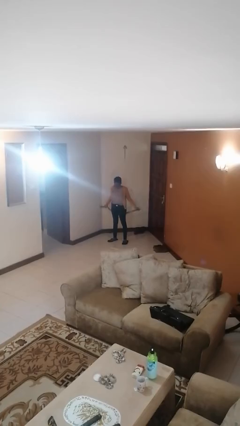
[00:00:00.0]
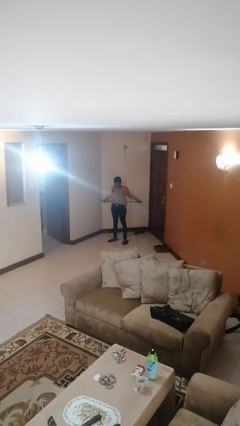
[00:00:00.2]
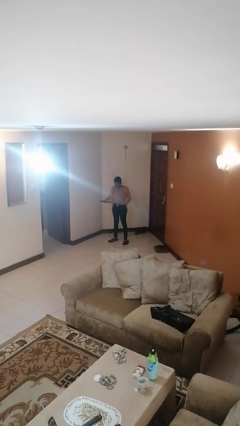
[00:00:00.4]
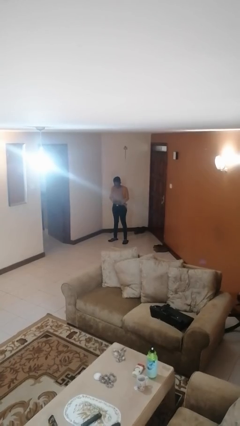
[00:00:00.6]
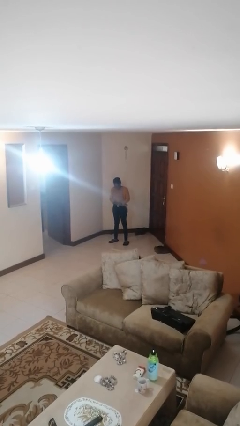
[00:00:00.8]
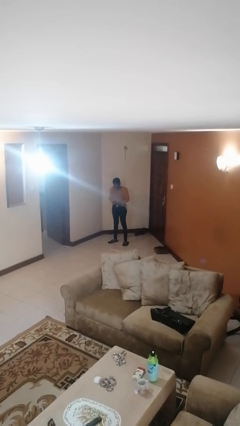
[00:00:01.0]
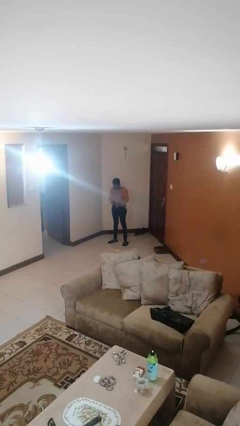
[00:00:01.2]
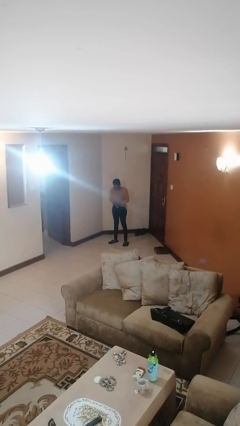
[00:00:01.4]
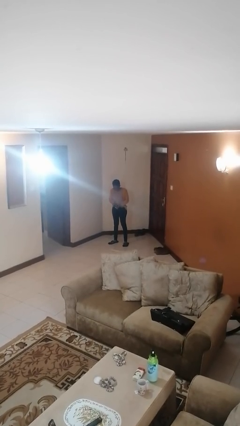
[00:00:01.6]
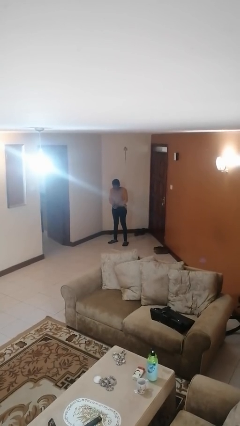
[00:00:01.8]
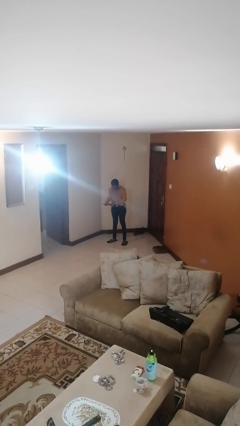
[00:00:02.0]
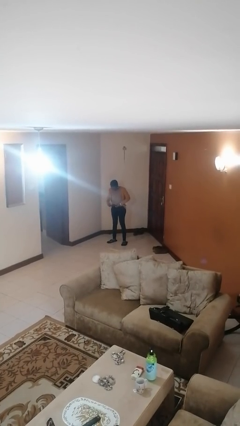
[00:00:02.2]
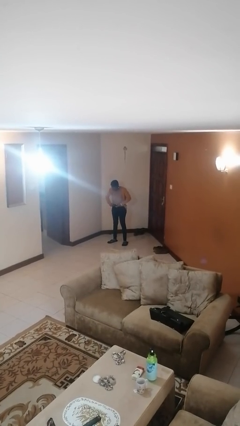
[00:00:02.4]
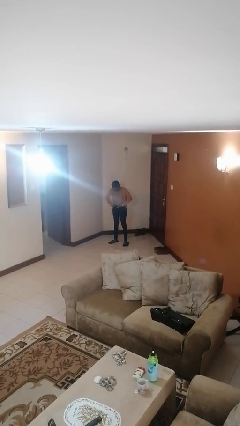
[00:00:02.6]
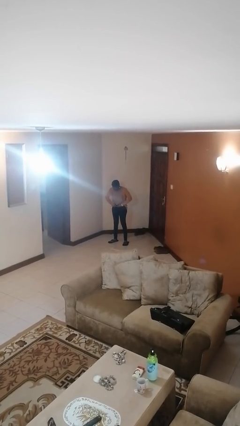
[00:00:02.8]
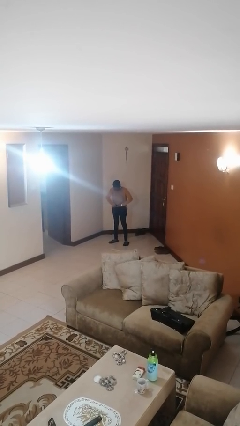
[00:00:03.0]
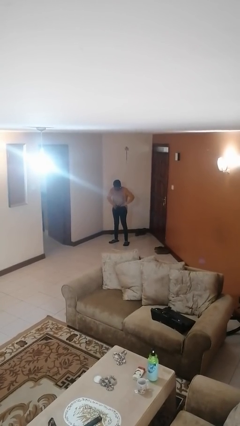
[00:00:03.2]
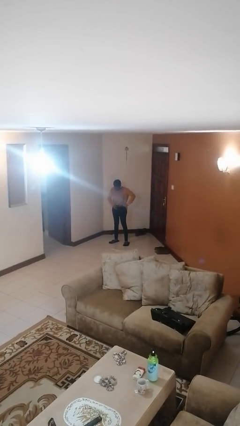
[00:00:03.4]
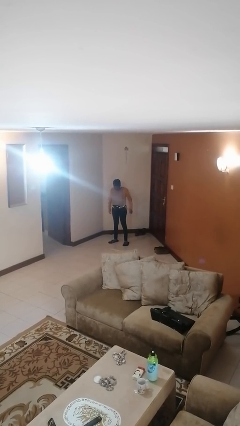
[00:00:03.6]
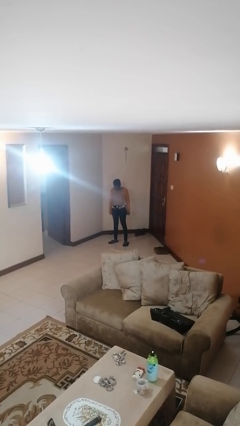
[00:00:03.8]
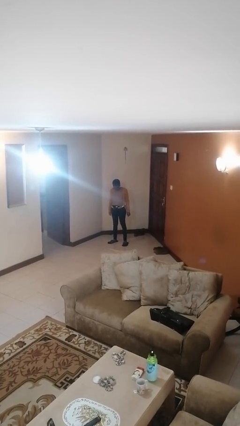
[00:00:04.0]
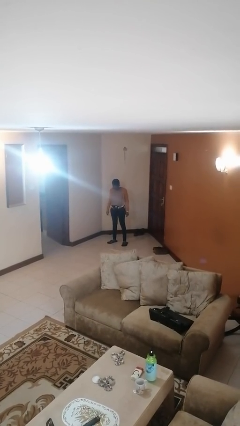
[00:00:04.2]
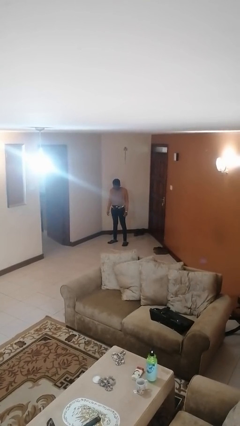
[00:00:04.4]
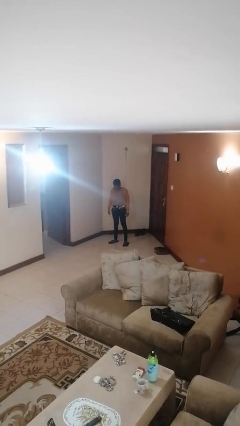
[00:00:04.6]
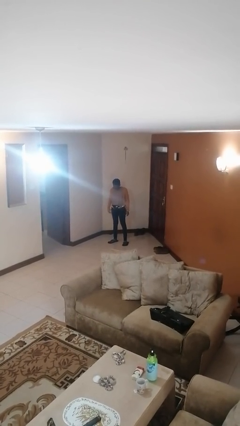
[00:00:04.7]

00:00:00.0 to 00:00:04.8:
person puts on belt

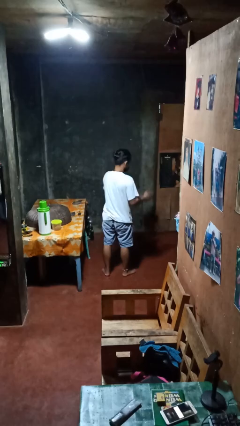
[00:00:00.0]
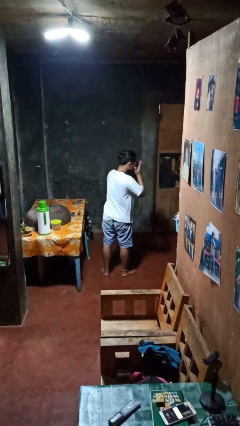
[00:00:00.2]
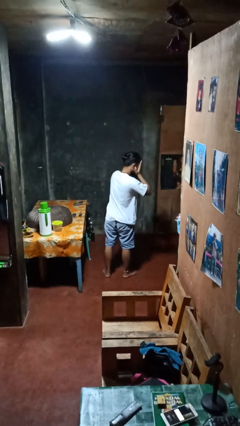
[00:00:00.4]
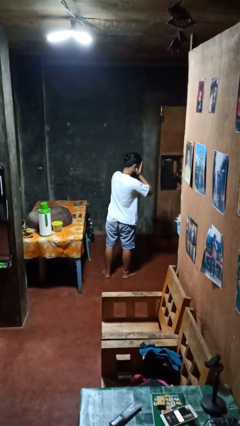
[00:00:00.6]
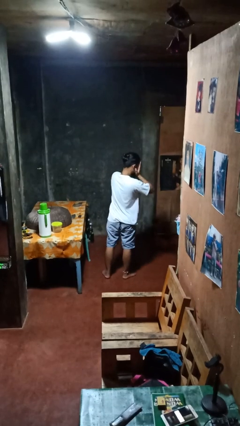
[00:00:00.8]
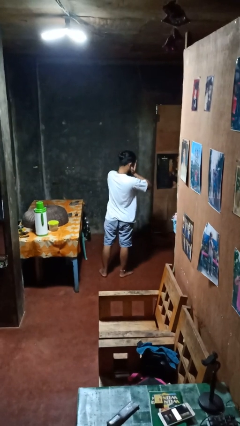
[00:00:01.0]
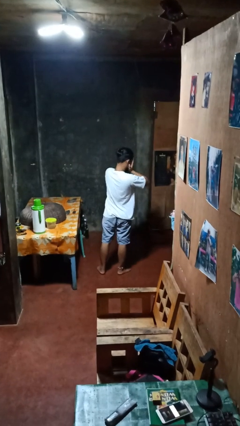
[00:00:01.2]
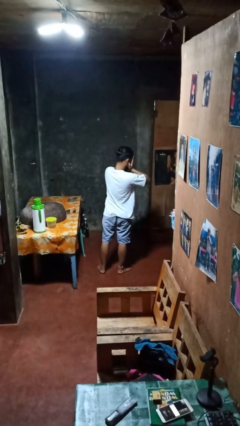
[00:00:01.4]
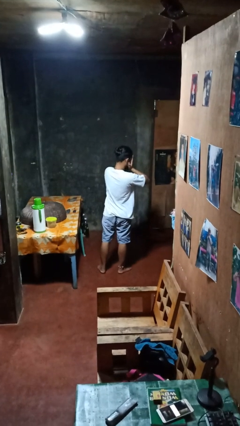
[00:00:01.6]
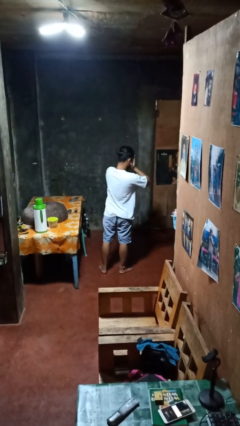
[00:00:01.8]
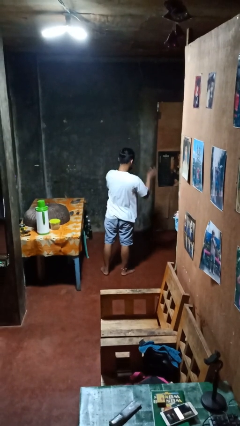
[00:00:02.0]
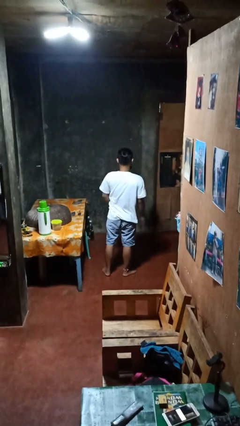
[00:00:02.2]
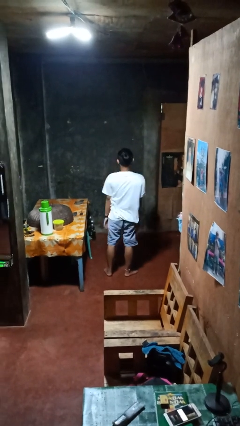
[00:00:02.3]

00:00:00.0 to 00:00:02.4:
person covers face with hands

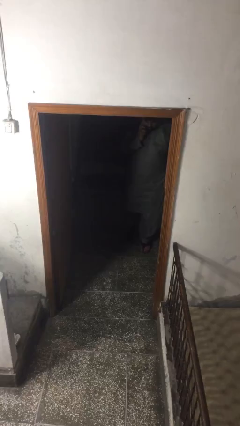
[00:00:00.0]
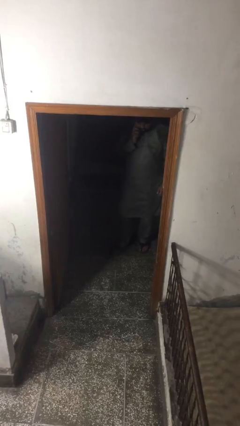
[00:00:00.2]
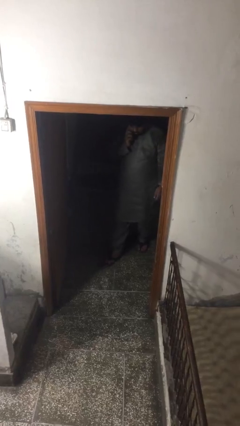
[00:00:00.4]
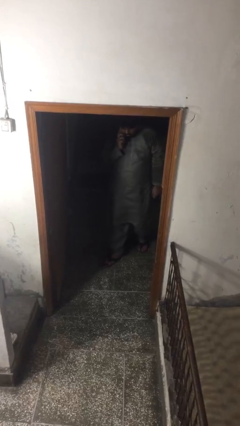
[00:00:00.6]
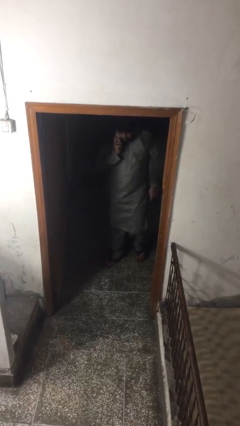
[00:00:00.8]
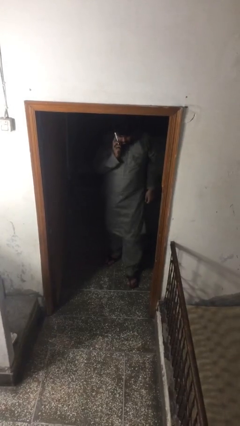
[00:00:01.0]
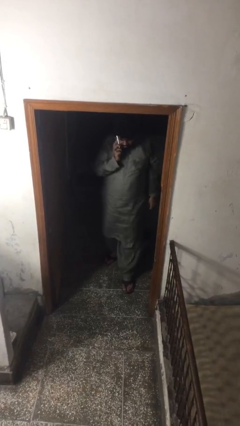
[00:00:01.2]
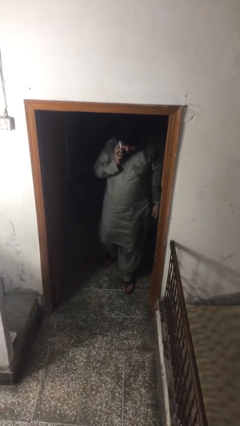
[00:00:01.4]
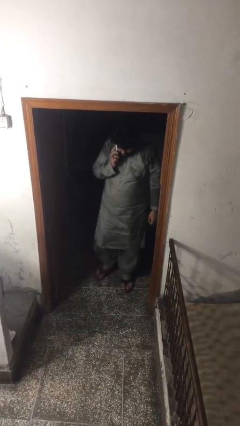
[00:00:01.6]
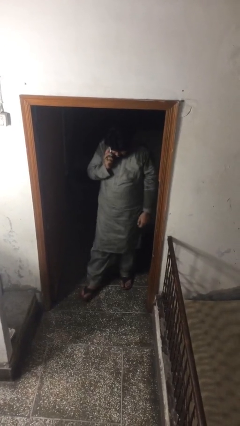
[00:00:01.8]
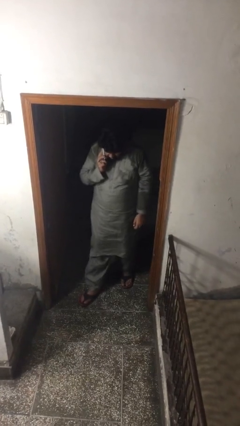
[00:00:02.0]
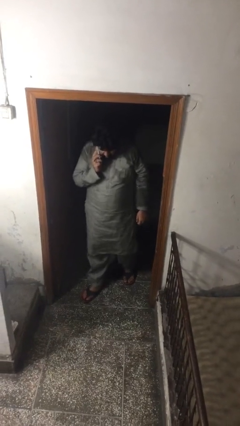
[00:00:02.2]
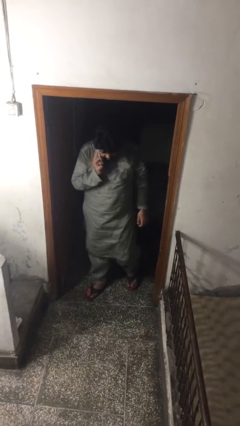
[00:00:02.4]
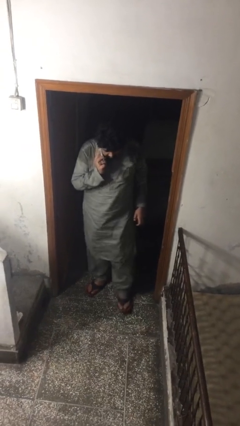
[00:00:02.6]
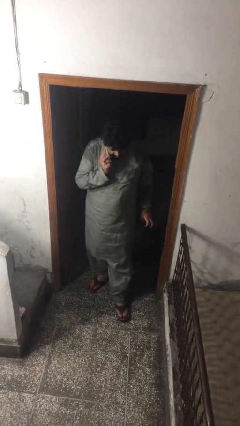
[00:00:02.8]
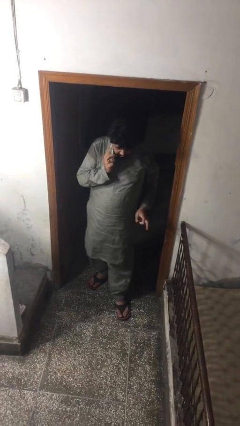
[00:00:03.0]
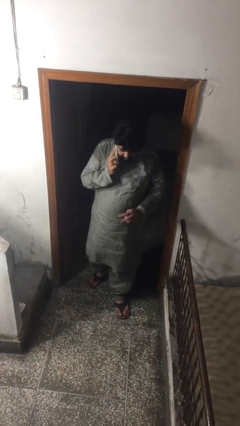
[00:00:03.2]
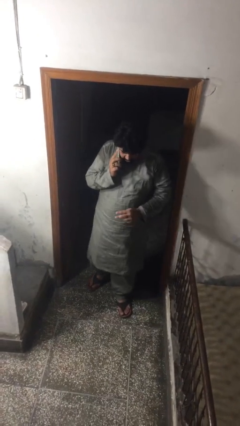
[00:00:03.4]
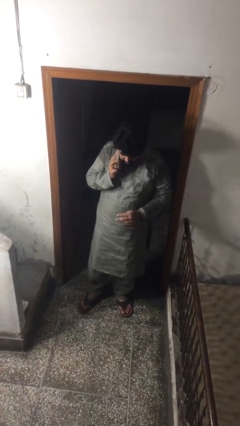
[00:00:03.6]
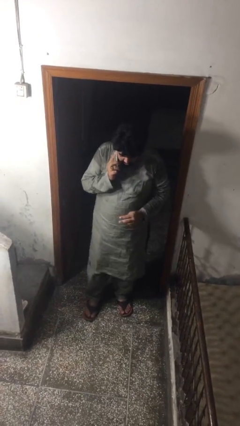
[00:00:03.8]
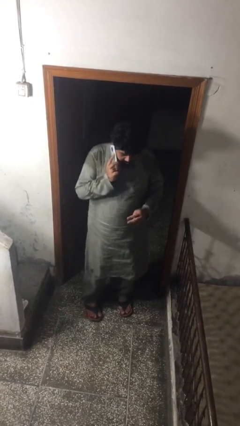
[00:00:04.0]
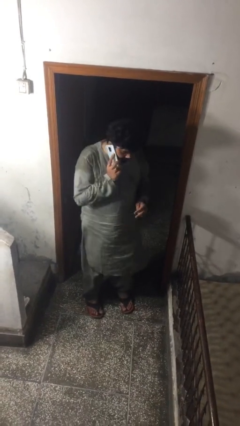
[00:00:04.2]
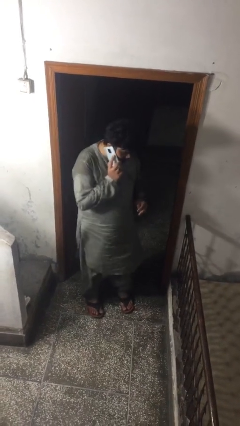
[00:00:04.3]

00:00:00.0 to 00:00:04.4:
person enters scene through structure

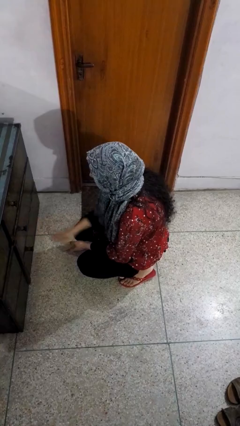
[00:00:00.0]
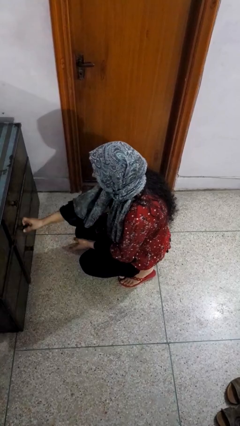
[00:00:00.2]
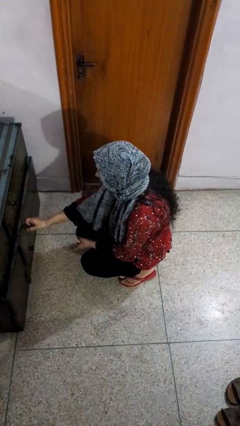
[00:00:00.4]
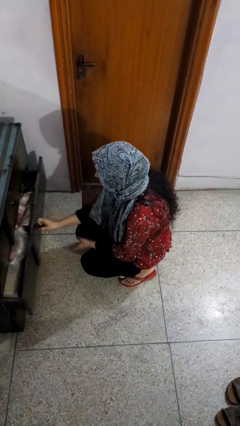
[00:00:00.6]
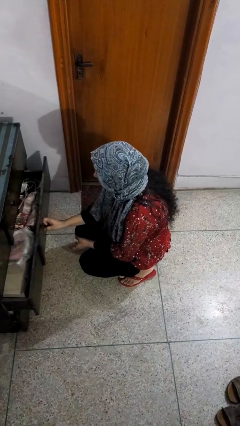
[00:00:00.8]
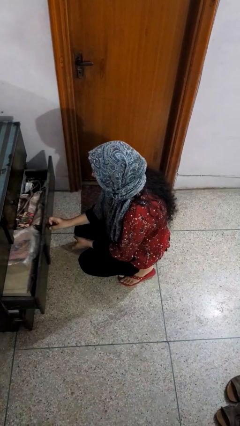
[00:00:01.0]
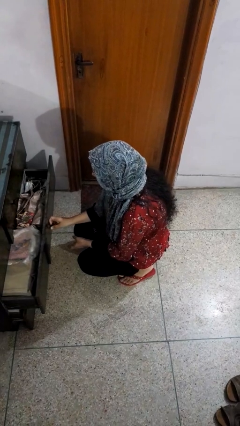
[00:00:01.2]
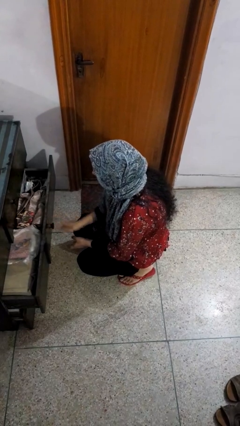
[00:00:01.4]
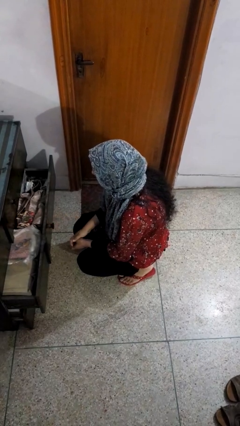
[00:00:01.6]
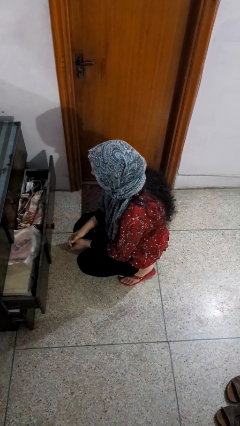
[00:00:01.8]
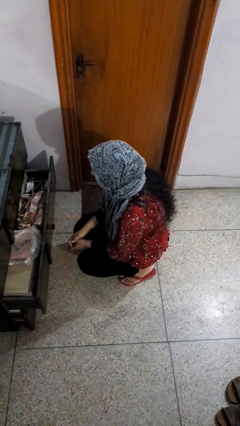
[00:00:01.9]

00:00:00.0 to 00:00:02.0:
person opens dresser drawer

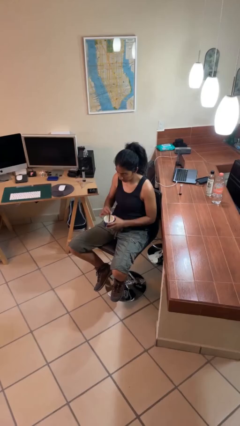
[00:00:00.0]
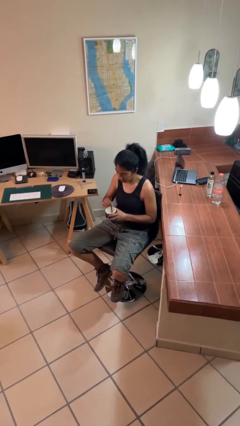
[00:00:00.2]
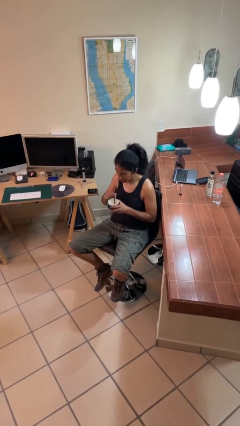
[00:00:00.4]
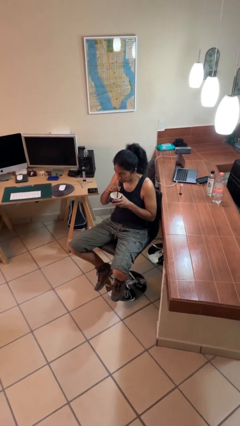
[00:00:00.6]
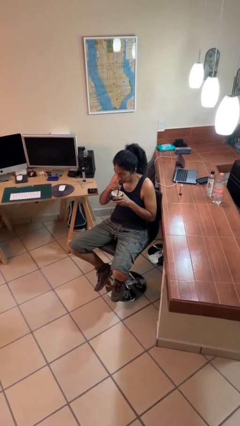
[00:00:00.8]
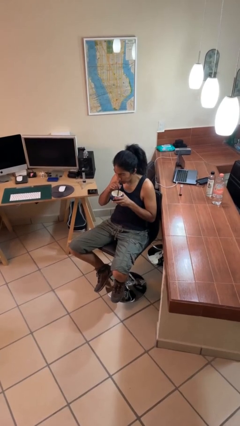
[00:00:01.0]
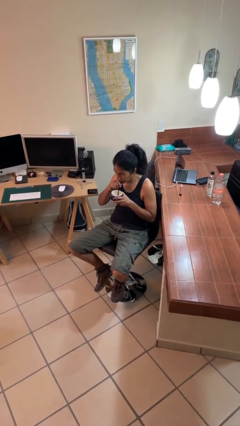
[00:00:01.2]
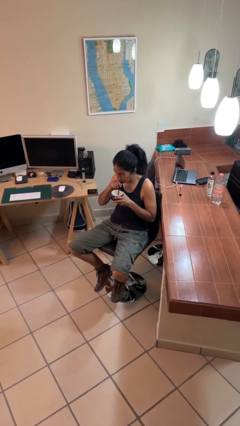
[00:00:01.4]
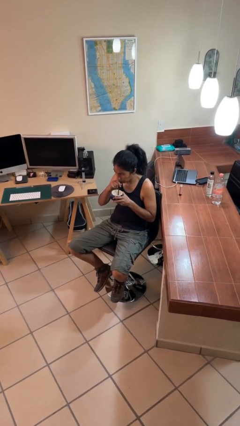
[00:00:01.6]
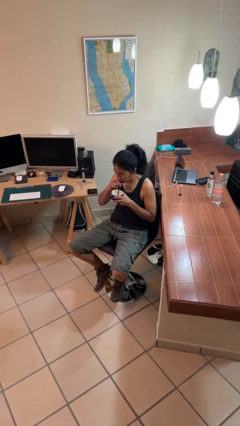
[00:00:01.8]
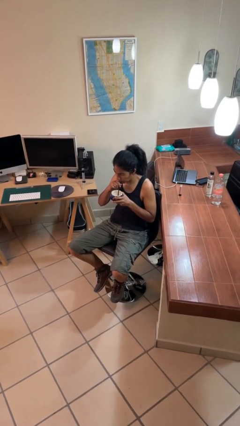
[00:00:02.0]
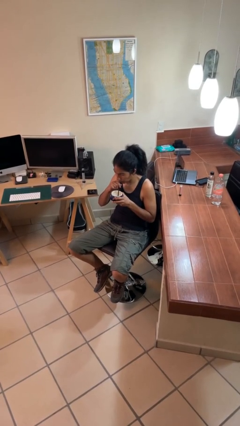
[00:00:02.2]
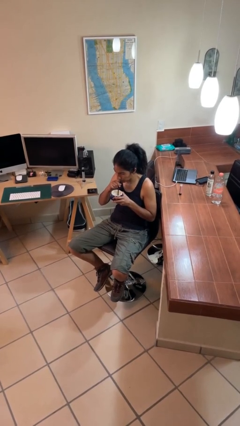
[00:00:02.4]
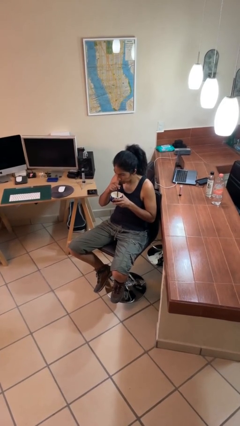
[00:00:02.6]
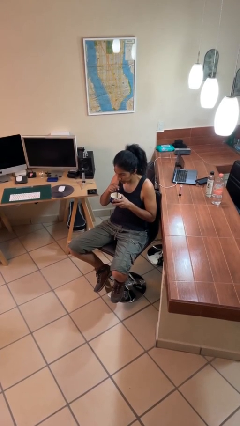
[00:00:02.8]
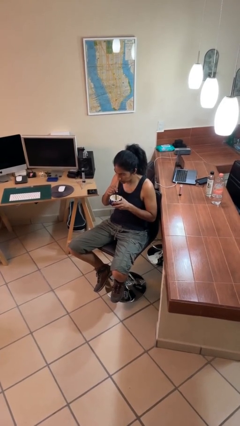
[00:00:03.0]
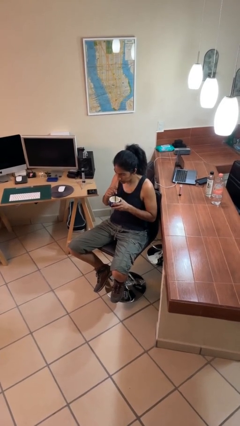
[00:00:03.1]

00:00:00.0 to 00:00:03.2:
person drinks from straw

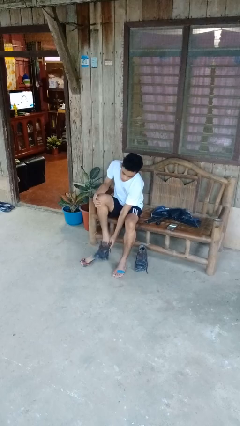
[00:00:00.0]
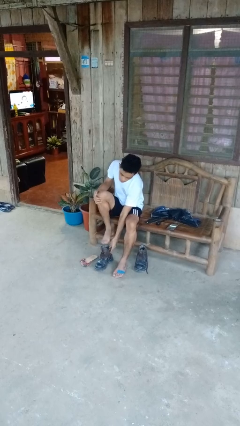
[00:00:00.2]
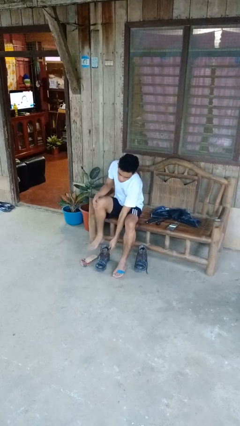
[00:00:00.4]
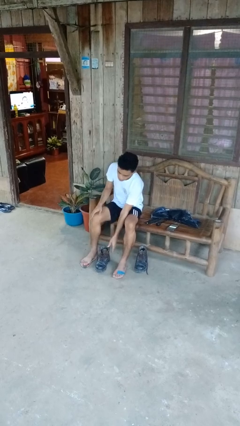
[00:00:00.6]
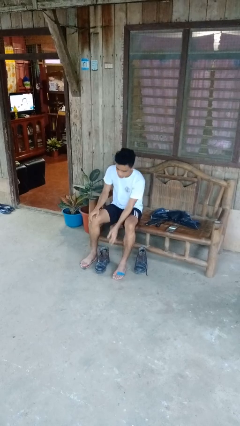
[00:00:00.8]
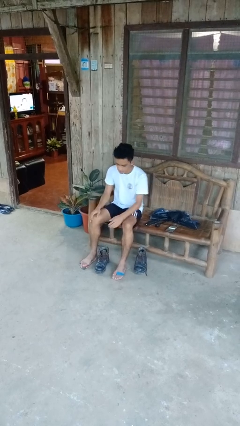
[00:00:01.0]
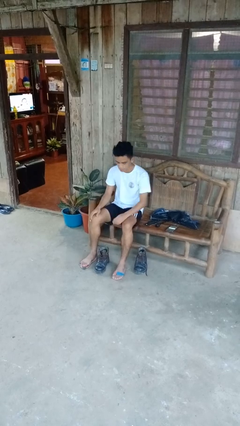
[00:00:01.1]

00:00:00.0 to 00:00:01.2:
person takes off boots
